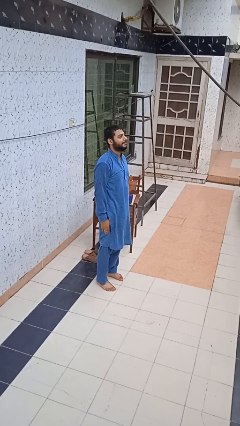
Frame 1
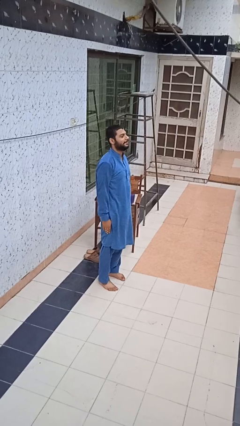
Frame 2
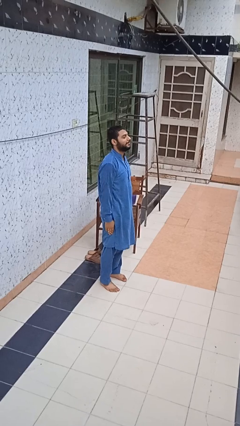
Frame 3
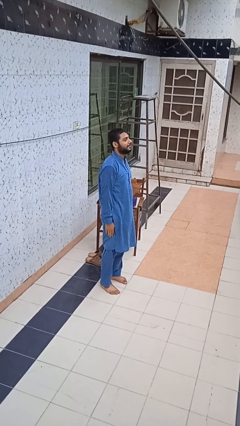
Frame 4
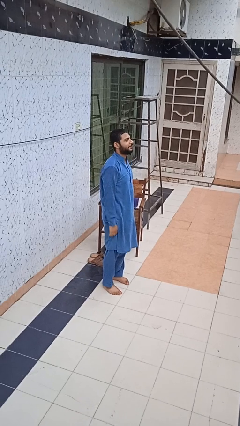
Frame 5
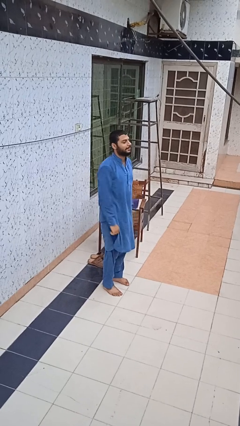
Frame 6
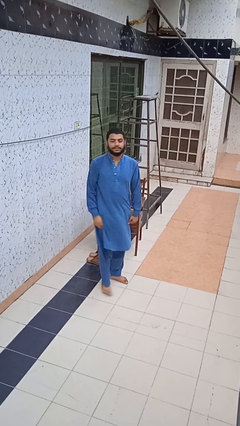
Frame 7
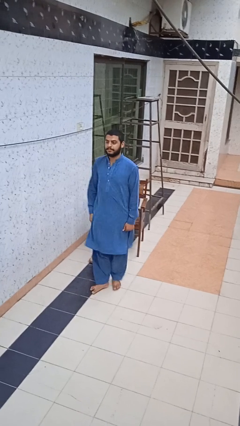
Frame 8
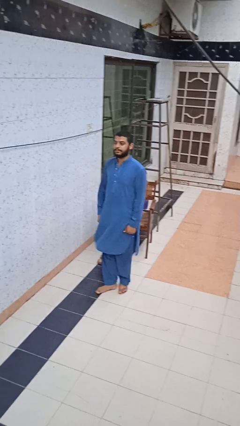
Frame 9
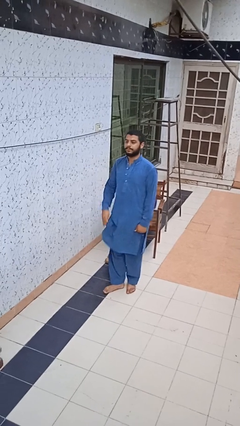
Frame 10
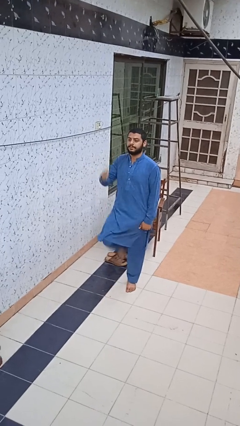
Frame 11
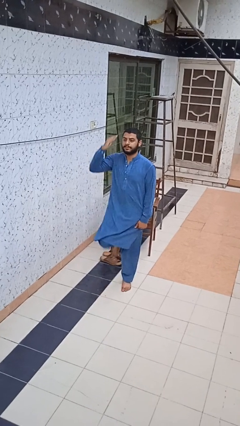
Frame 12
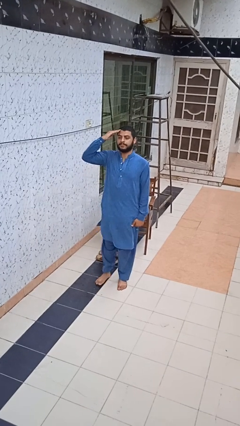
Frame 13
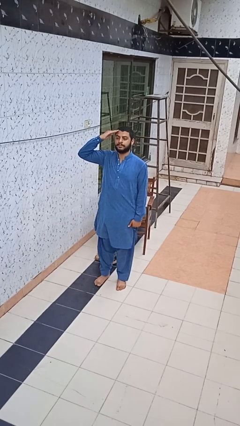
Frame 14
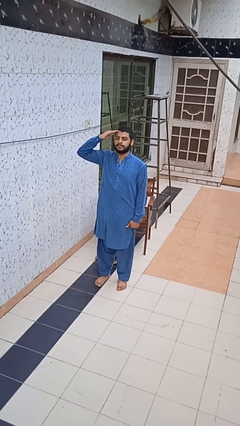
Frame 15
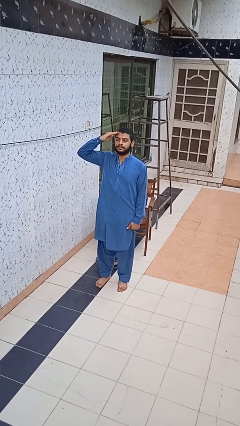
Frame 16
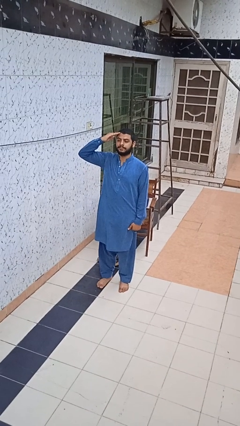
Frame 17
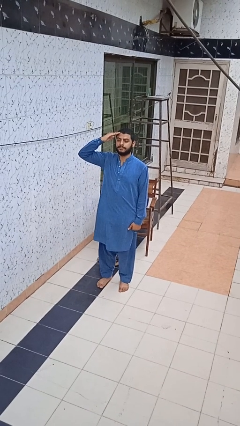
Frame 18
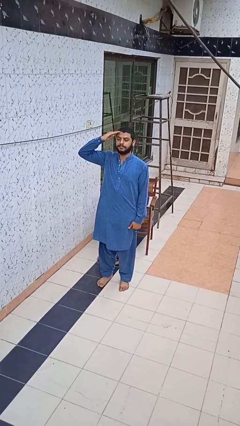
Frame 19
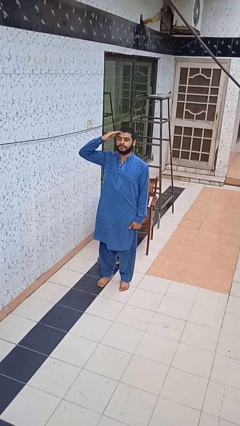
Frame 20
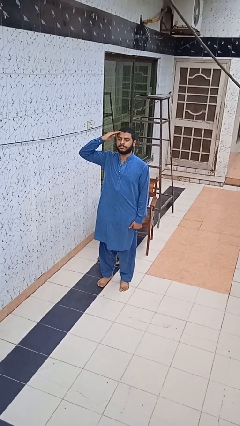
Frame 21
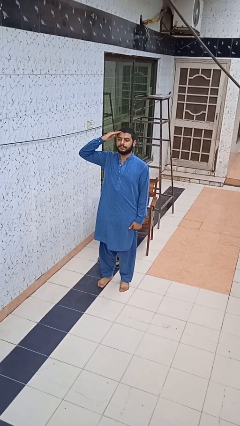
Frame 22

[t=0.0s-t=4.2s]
person salutes

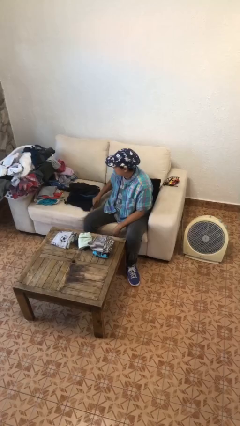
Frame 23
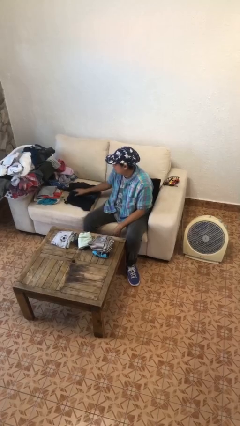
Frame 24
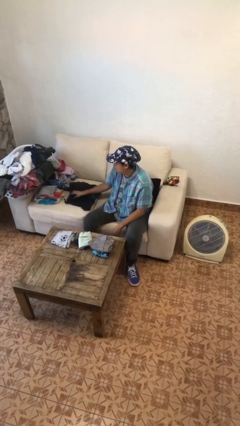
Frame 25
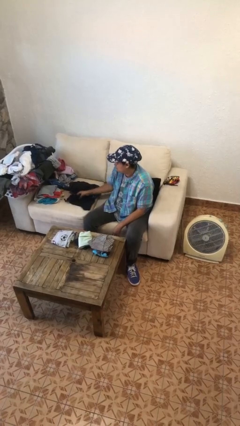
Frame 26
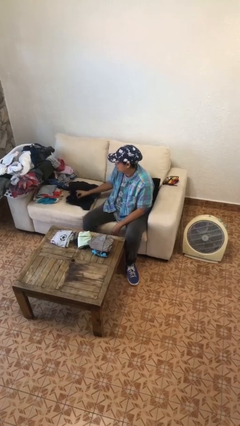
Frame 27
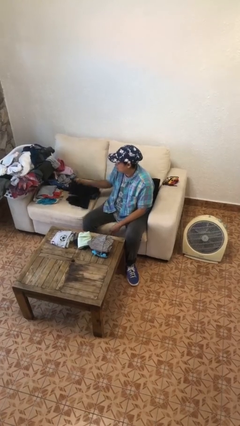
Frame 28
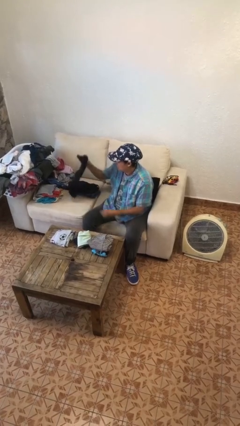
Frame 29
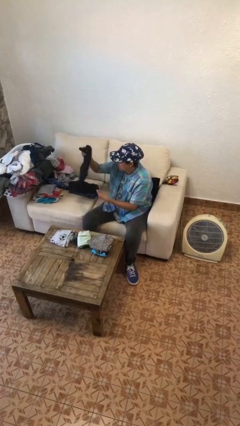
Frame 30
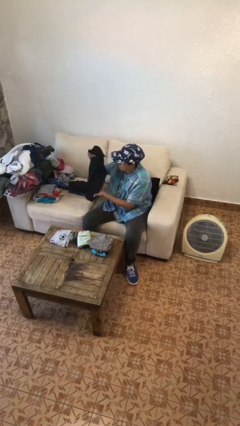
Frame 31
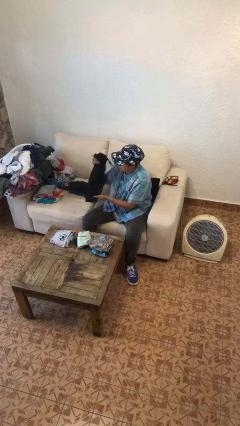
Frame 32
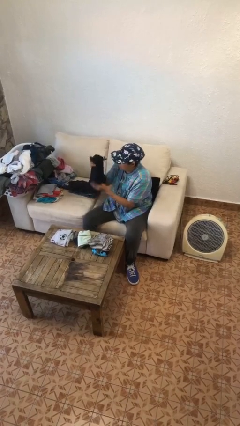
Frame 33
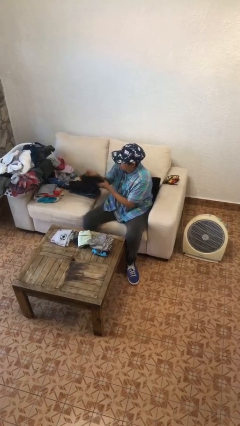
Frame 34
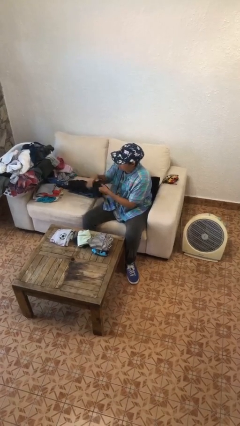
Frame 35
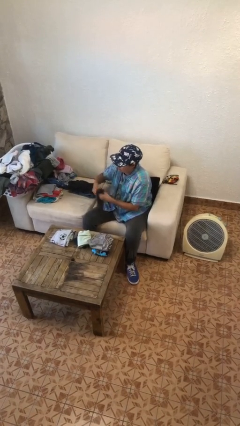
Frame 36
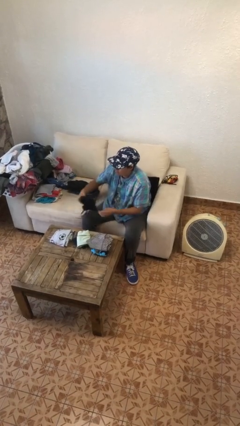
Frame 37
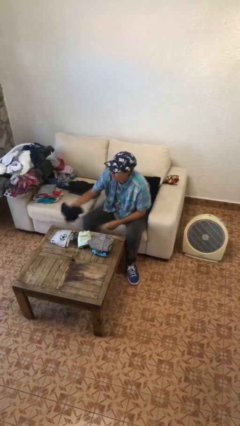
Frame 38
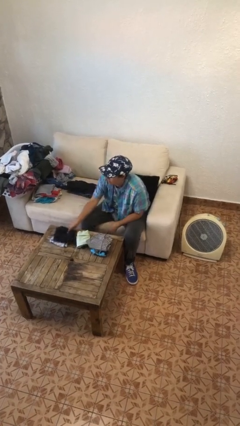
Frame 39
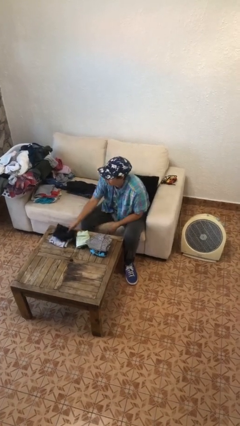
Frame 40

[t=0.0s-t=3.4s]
person folds pants

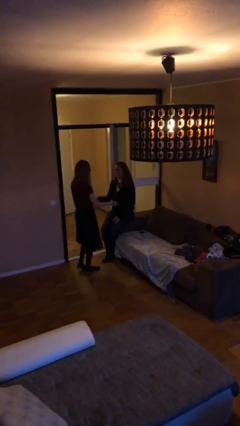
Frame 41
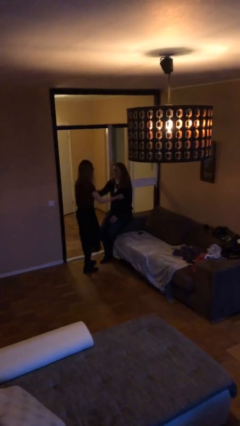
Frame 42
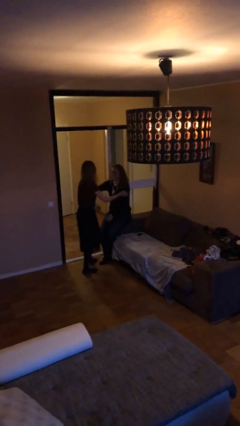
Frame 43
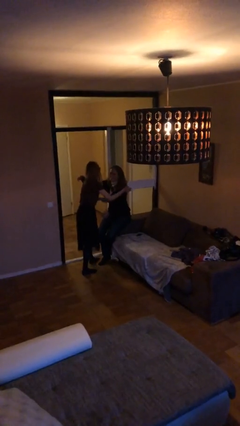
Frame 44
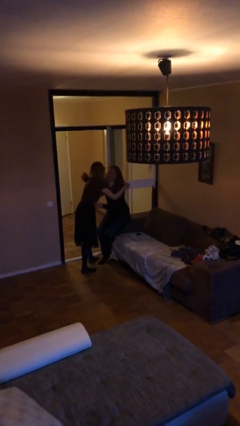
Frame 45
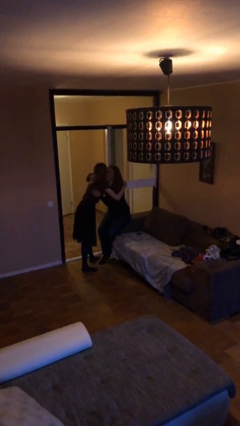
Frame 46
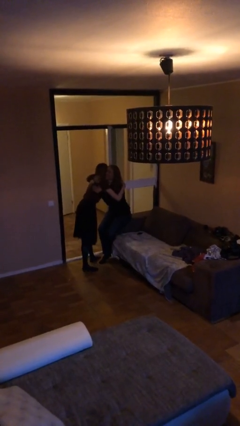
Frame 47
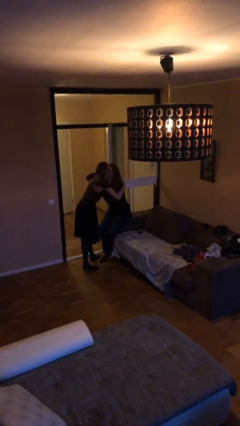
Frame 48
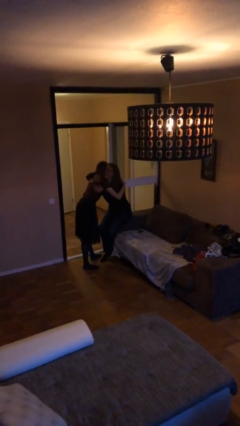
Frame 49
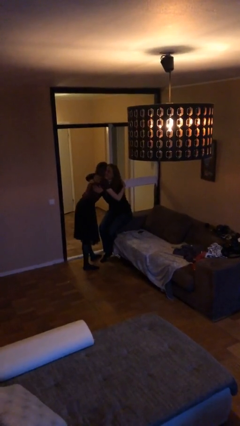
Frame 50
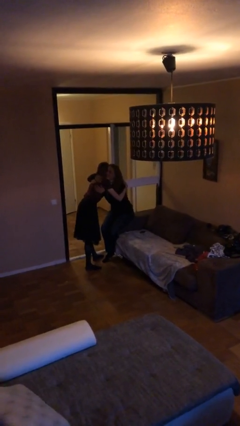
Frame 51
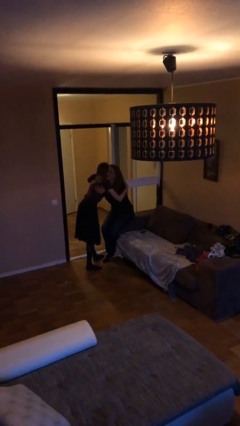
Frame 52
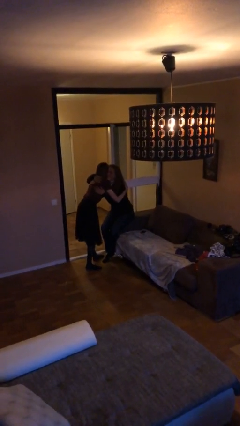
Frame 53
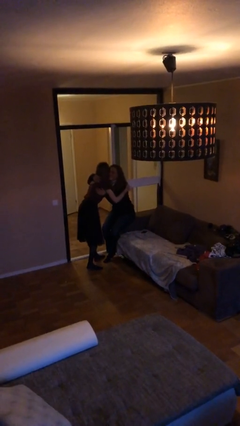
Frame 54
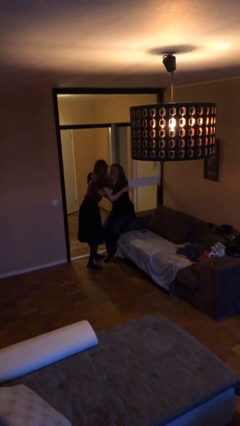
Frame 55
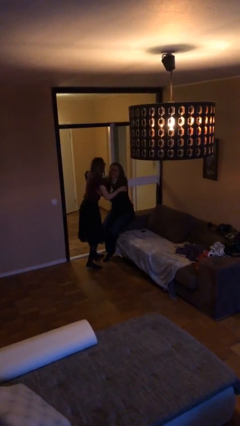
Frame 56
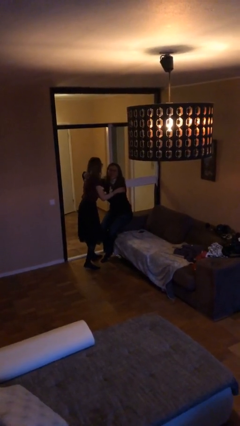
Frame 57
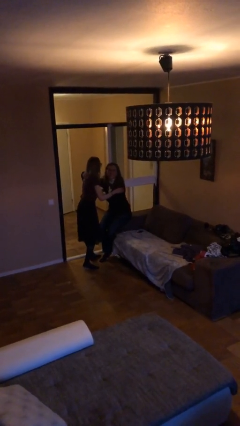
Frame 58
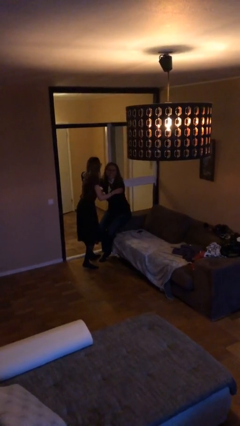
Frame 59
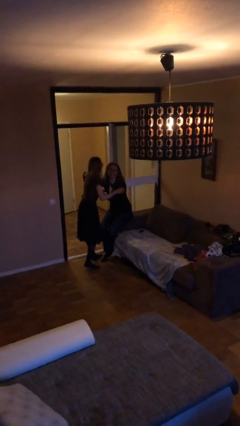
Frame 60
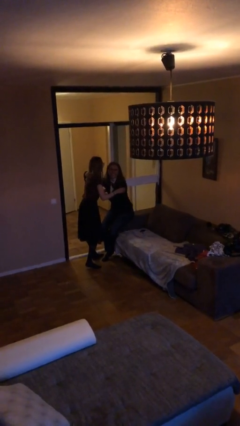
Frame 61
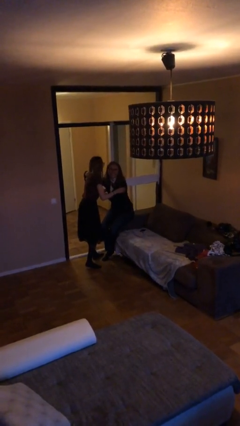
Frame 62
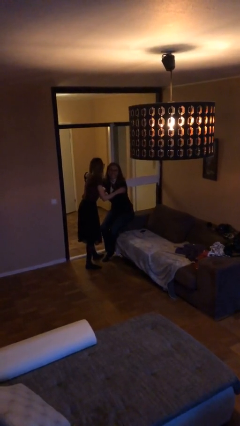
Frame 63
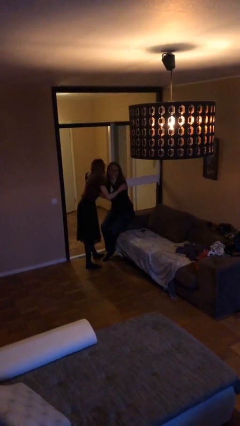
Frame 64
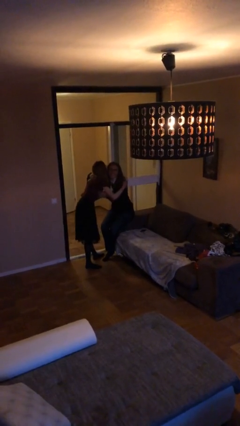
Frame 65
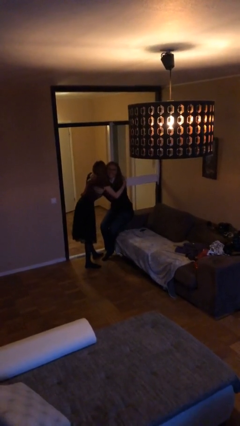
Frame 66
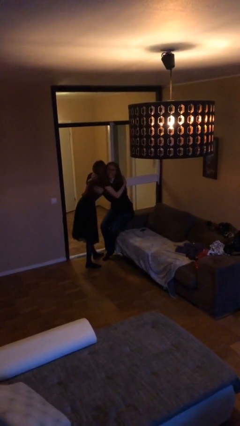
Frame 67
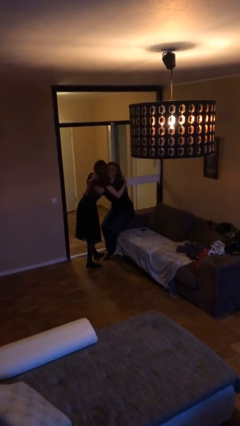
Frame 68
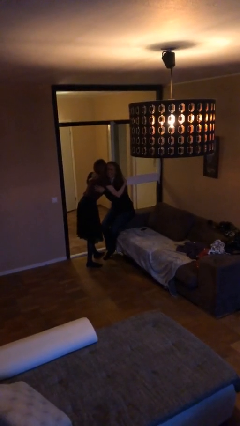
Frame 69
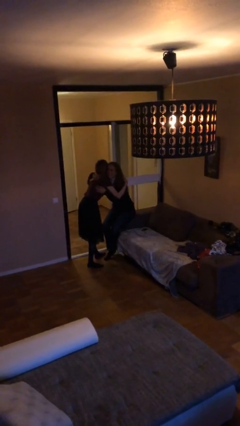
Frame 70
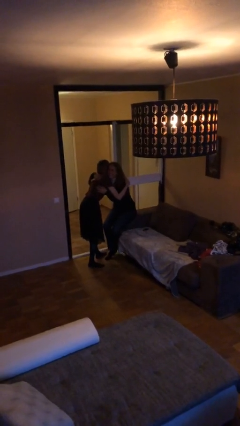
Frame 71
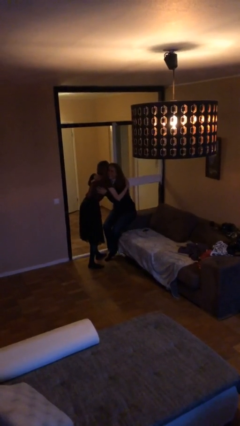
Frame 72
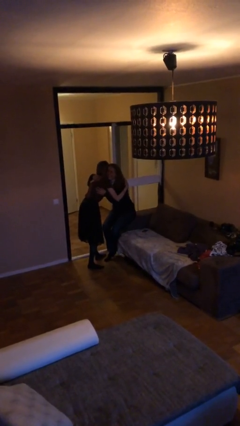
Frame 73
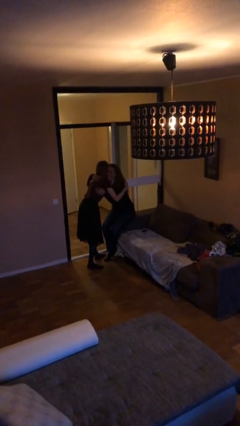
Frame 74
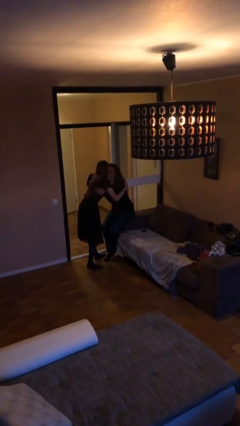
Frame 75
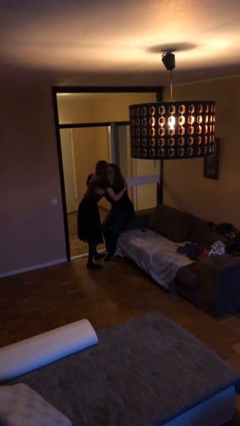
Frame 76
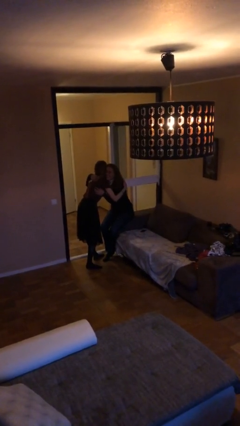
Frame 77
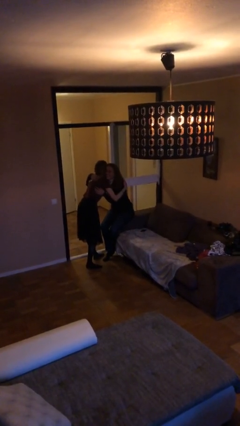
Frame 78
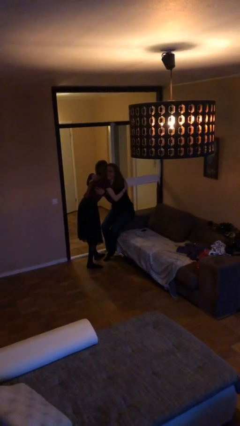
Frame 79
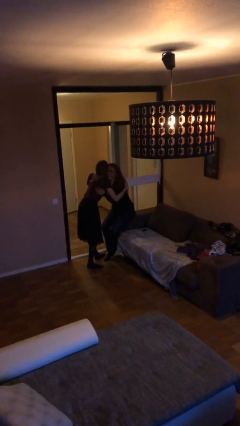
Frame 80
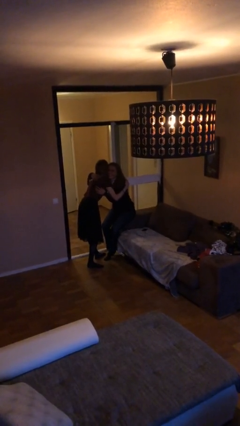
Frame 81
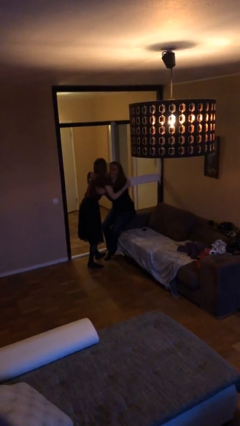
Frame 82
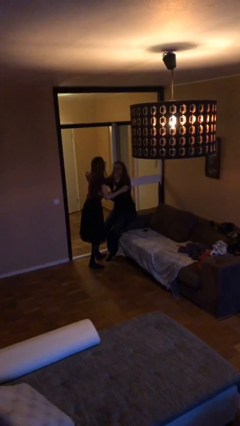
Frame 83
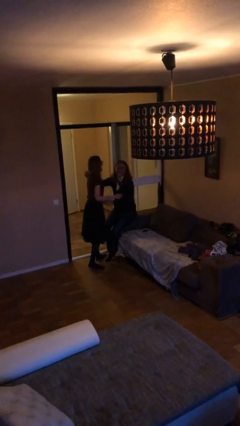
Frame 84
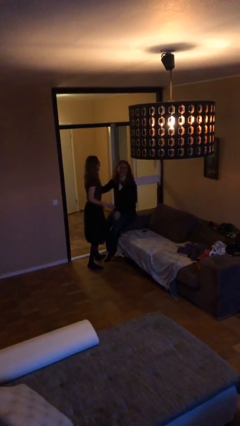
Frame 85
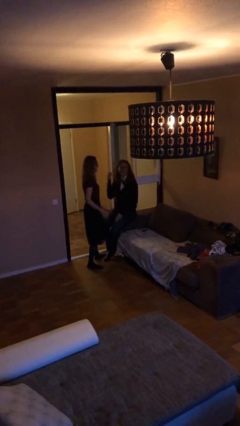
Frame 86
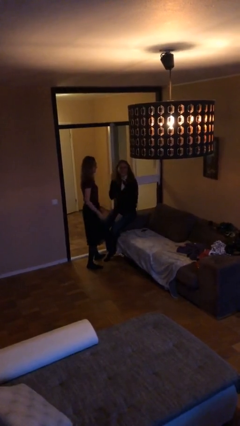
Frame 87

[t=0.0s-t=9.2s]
person embraces person

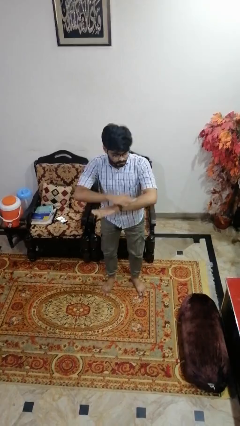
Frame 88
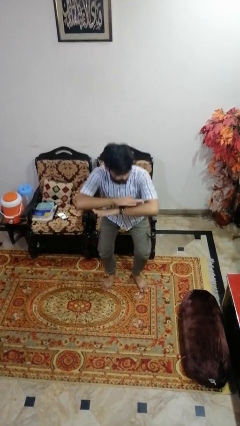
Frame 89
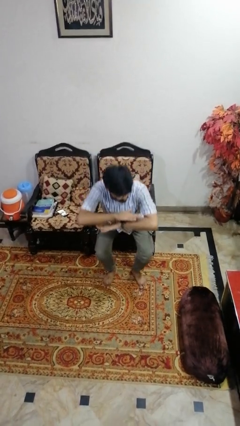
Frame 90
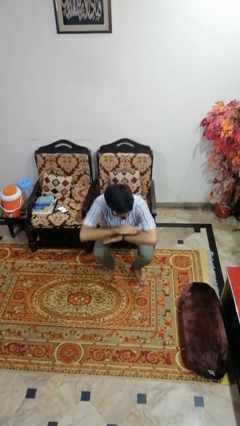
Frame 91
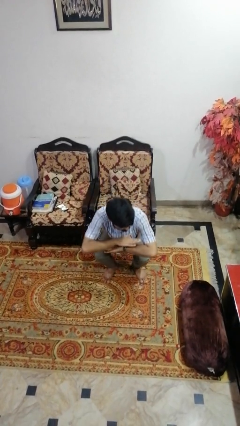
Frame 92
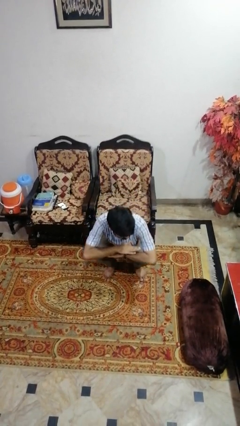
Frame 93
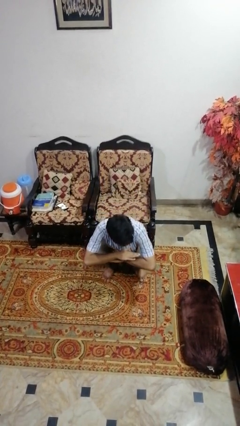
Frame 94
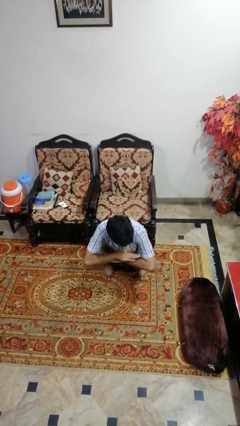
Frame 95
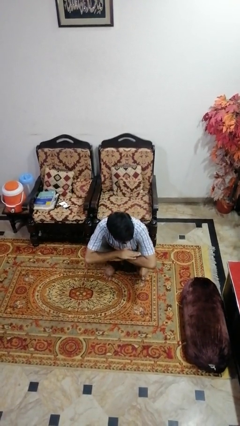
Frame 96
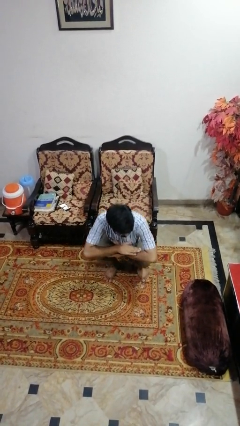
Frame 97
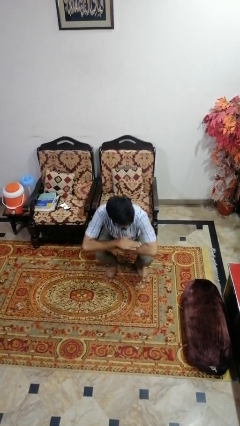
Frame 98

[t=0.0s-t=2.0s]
person squats
